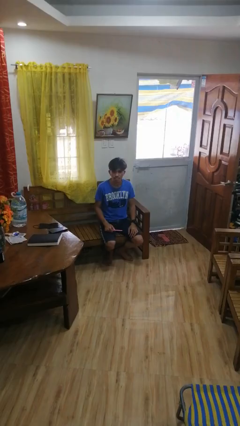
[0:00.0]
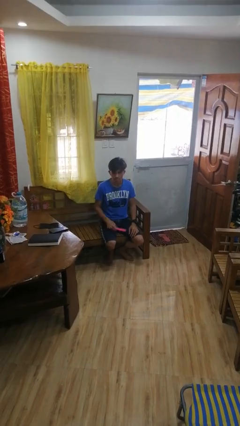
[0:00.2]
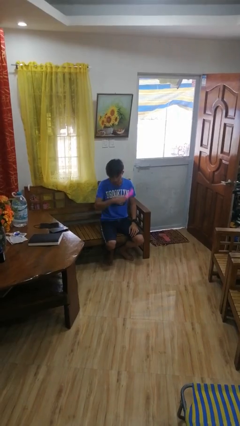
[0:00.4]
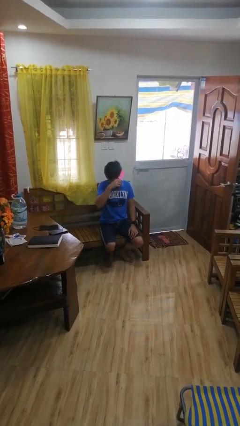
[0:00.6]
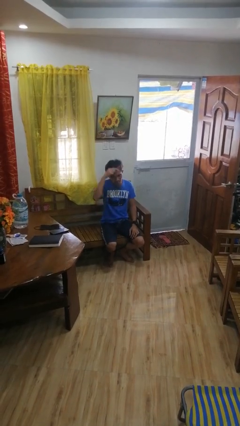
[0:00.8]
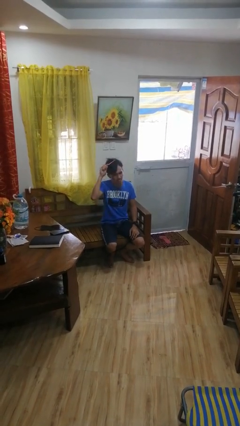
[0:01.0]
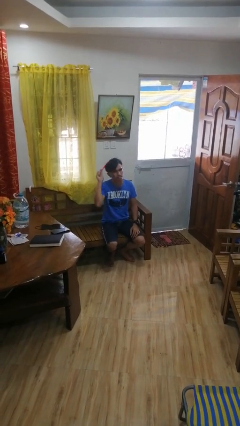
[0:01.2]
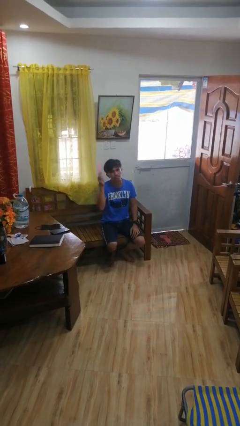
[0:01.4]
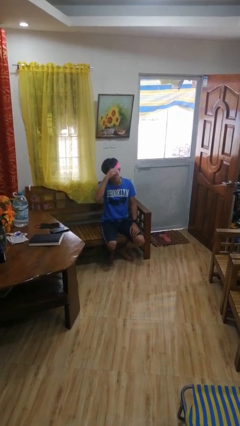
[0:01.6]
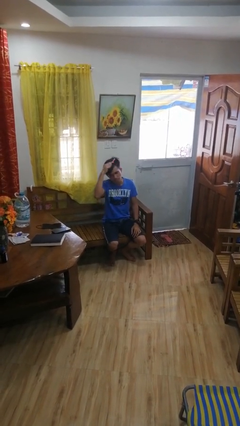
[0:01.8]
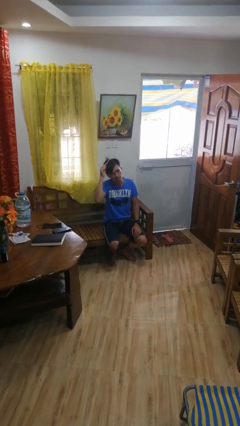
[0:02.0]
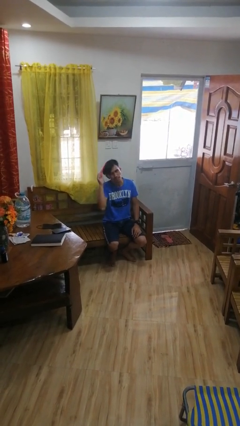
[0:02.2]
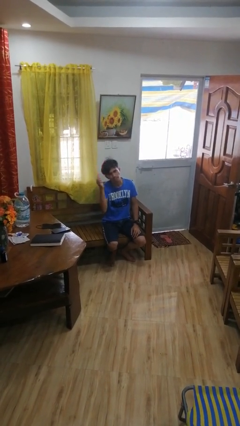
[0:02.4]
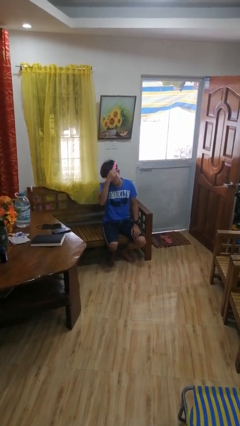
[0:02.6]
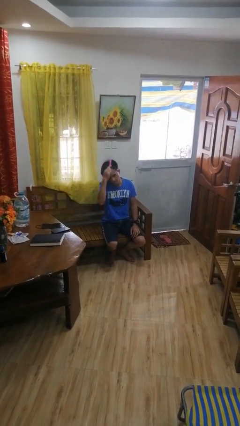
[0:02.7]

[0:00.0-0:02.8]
person brushes hair

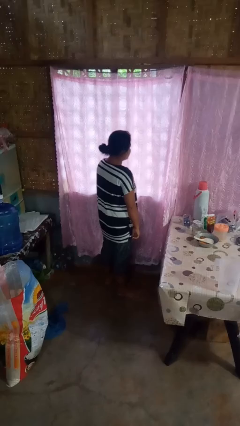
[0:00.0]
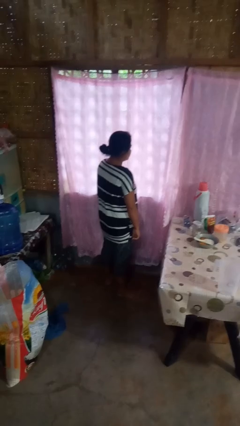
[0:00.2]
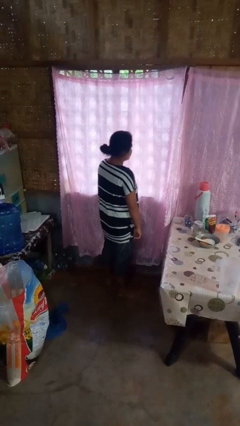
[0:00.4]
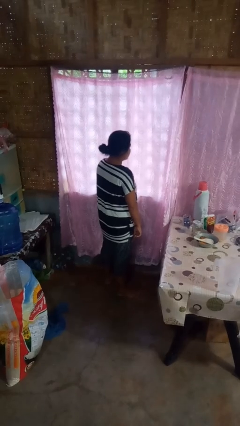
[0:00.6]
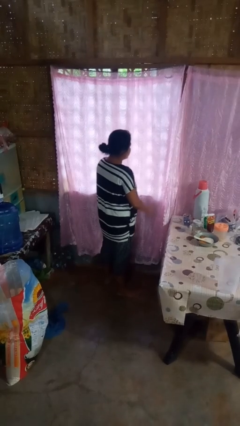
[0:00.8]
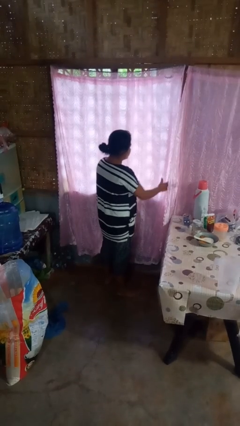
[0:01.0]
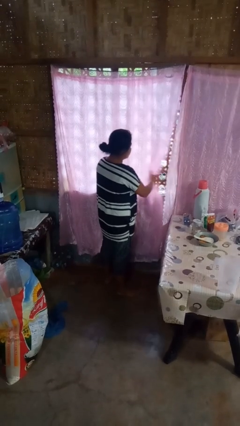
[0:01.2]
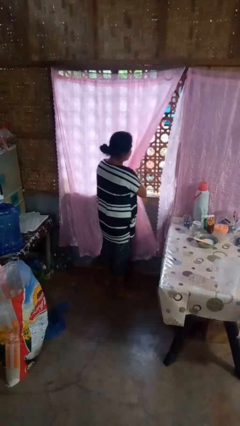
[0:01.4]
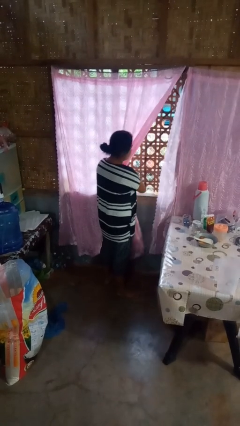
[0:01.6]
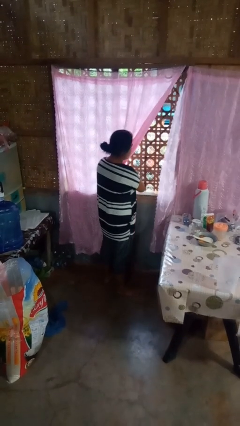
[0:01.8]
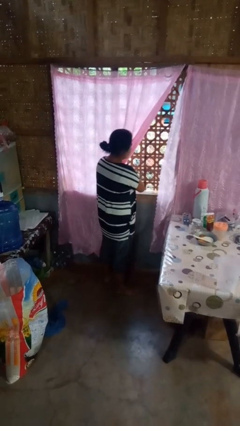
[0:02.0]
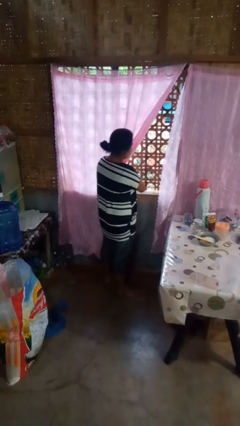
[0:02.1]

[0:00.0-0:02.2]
person opens curtains

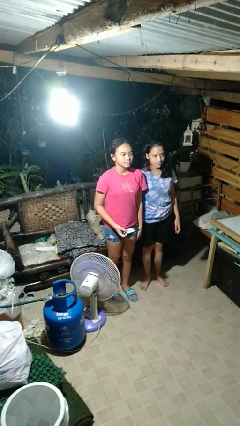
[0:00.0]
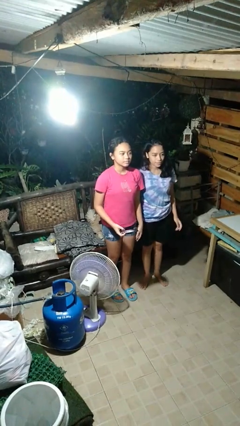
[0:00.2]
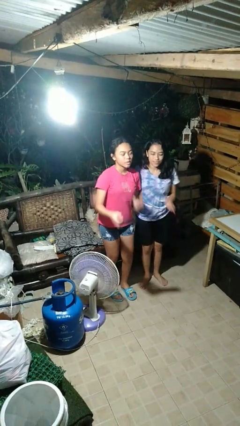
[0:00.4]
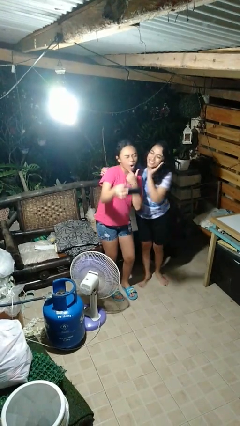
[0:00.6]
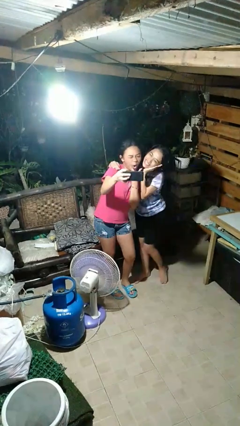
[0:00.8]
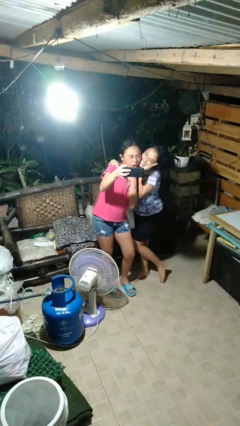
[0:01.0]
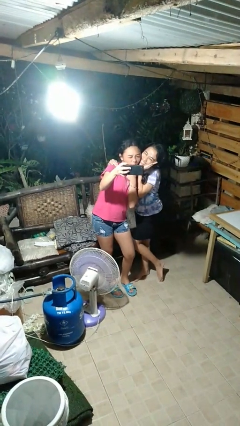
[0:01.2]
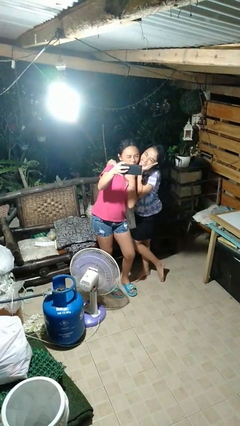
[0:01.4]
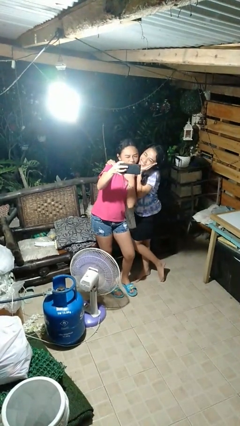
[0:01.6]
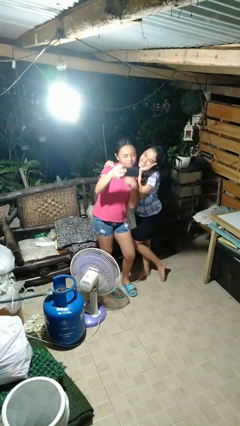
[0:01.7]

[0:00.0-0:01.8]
person takes selfie with person

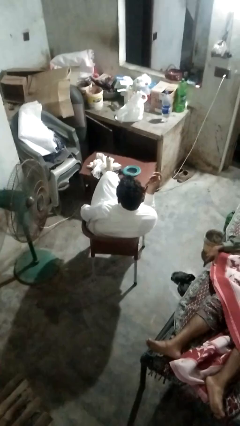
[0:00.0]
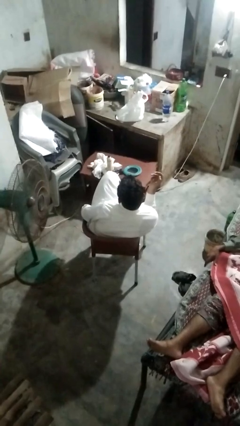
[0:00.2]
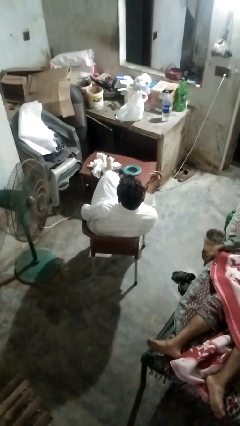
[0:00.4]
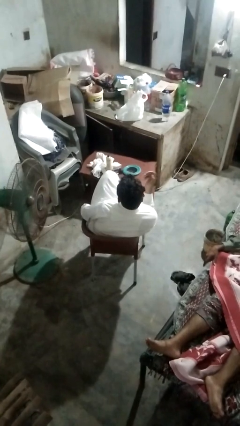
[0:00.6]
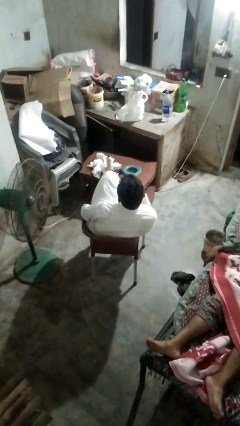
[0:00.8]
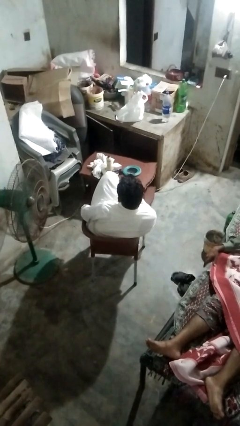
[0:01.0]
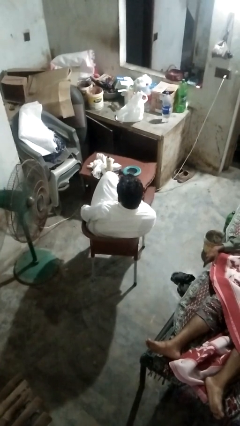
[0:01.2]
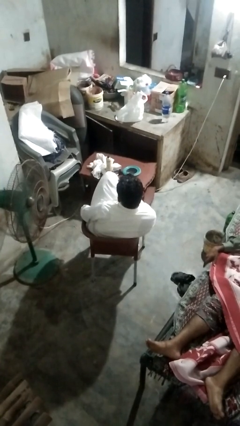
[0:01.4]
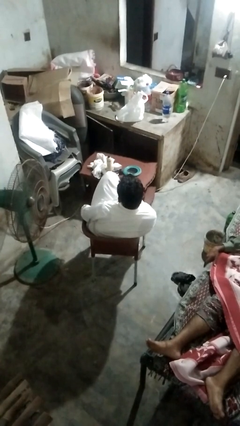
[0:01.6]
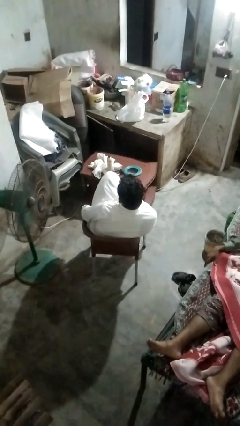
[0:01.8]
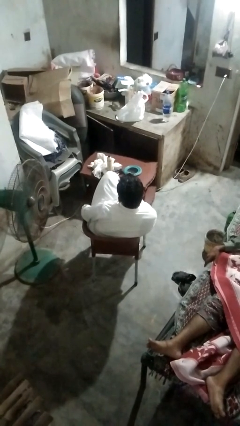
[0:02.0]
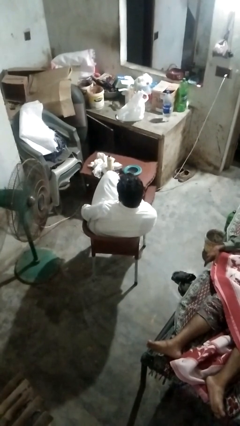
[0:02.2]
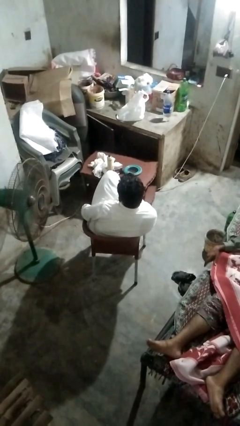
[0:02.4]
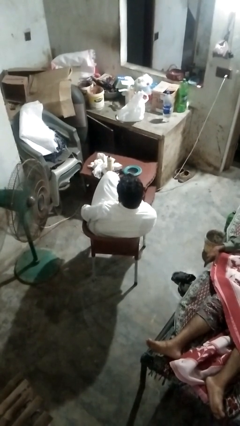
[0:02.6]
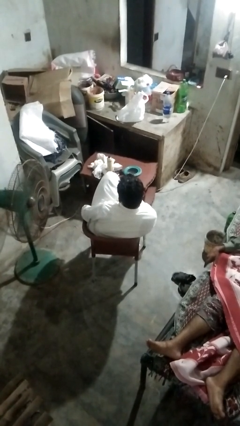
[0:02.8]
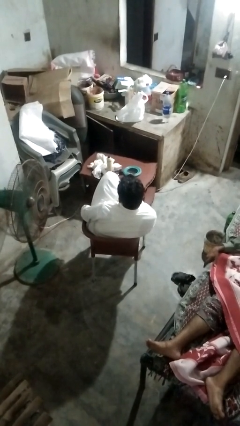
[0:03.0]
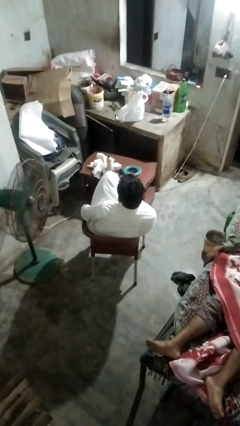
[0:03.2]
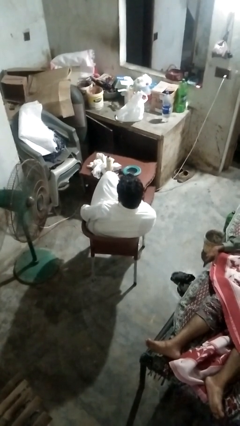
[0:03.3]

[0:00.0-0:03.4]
person licks fingers

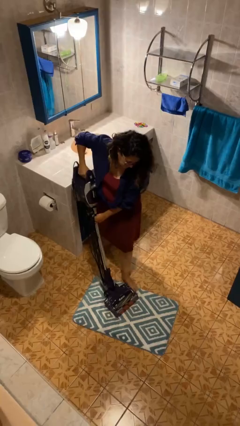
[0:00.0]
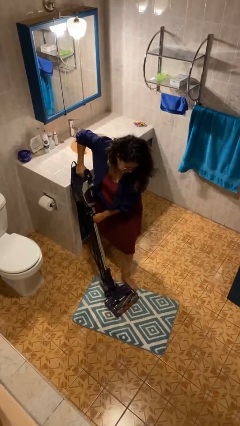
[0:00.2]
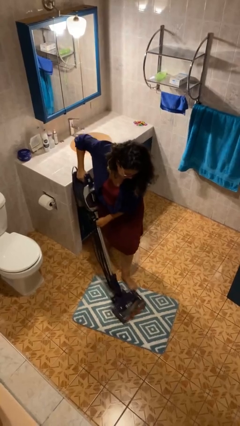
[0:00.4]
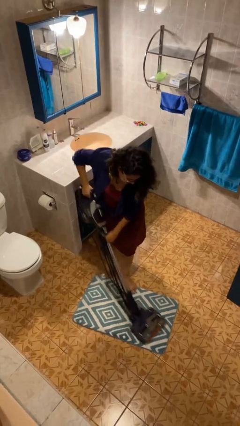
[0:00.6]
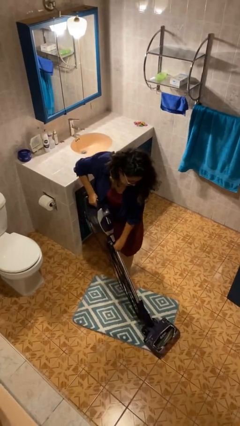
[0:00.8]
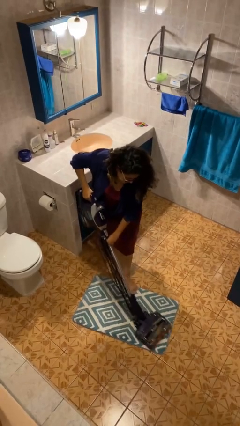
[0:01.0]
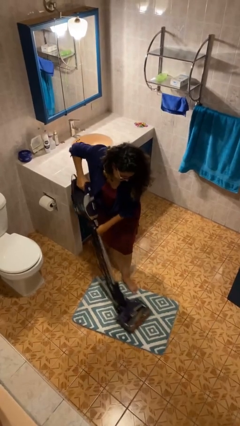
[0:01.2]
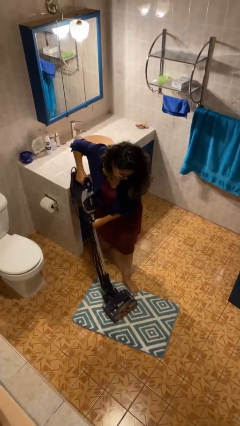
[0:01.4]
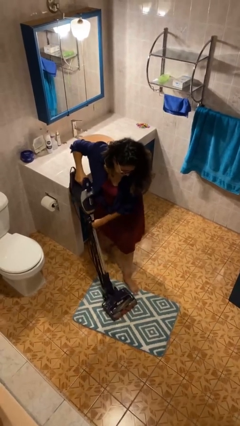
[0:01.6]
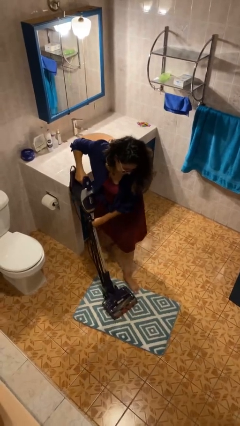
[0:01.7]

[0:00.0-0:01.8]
person vacuums carpet

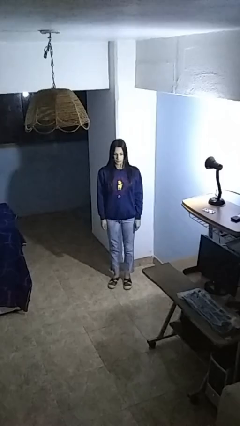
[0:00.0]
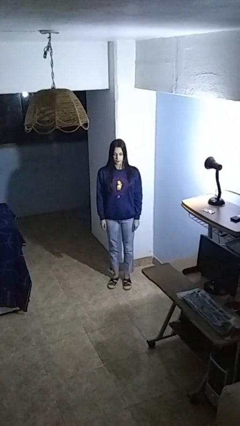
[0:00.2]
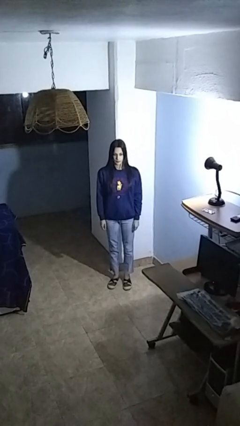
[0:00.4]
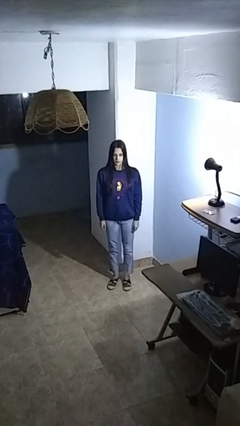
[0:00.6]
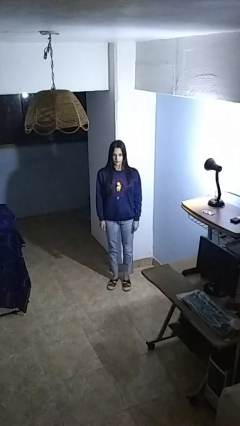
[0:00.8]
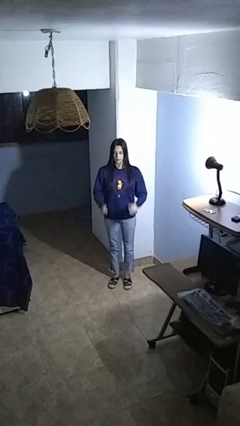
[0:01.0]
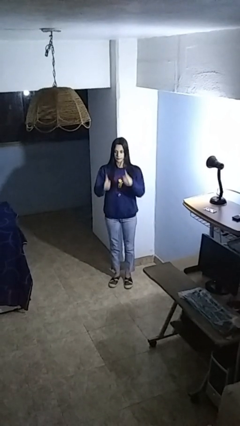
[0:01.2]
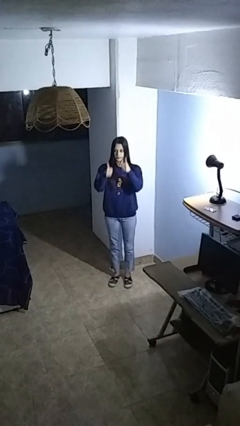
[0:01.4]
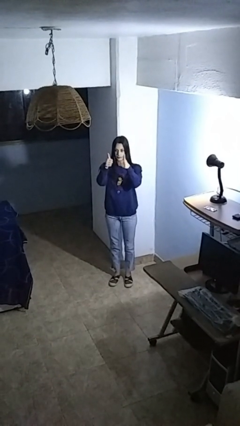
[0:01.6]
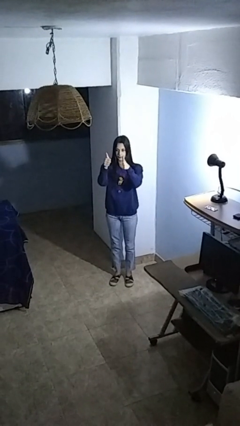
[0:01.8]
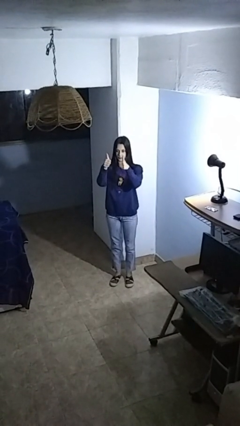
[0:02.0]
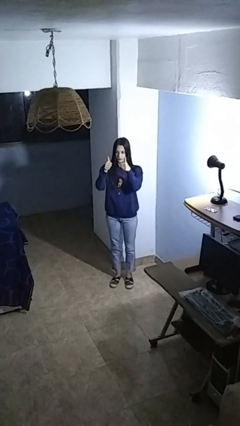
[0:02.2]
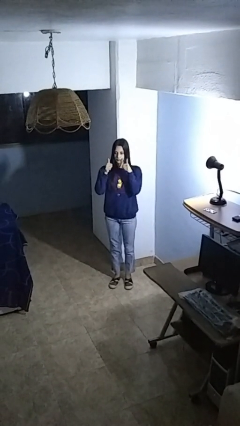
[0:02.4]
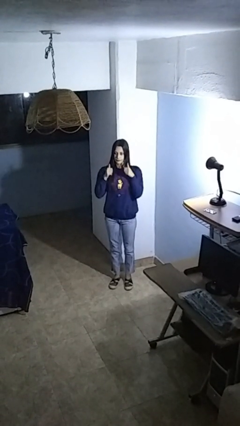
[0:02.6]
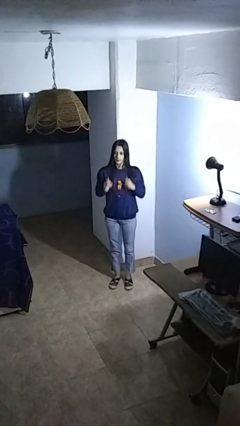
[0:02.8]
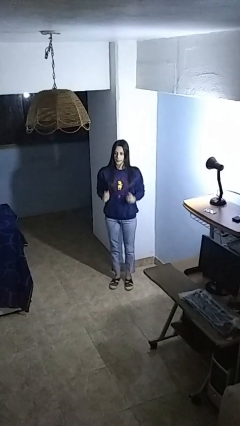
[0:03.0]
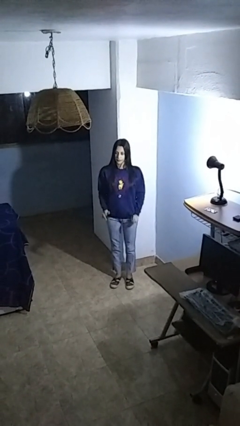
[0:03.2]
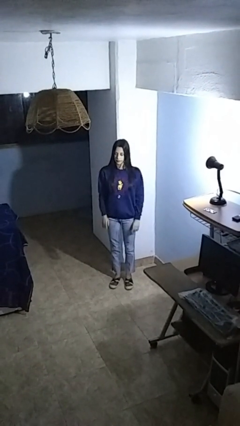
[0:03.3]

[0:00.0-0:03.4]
person gestures thumbs up

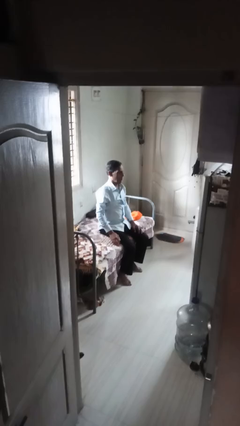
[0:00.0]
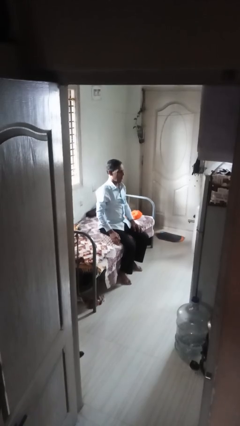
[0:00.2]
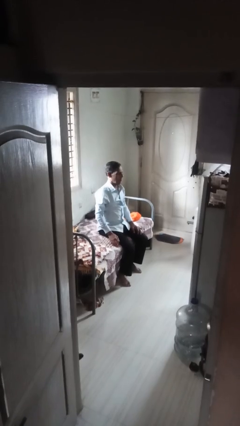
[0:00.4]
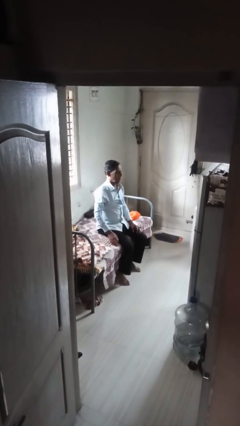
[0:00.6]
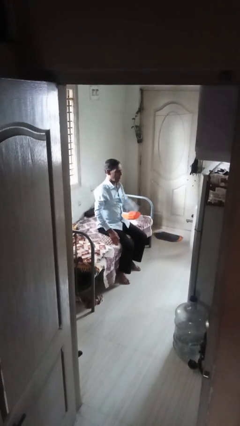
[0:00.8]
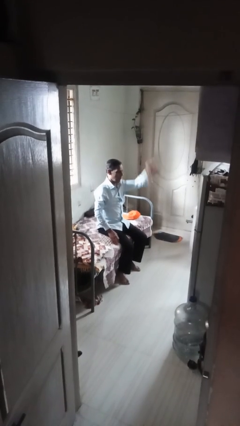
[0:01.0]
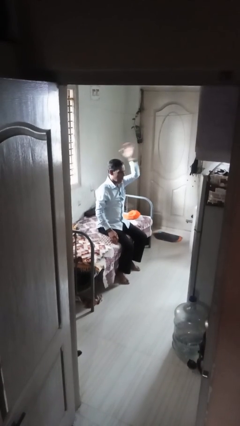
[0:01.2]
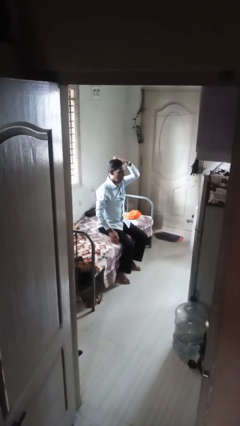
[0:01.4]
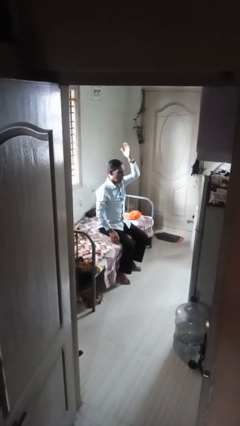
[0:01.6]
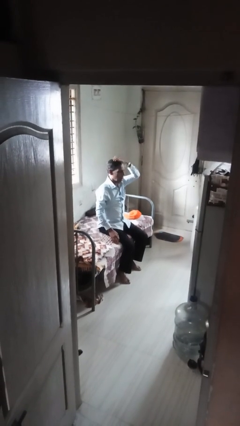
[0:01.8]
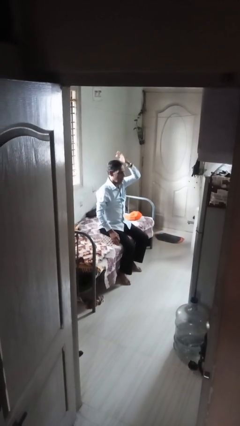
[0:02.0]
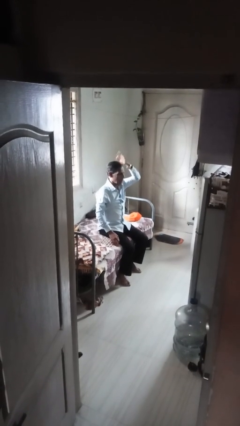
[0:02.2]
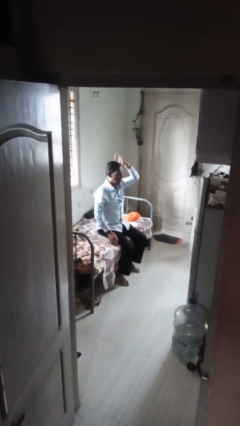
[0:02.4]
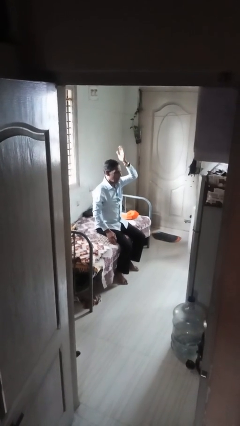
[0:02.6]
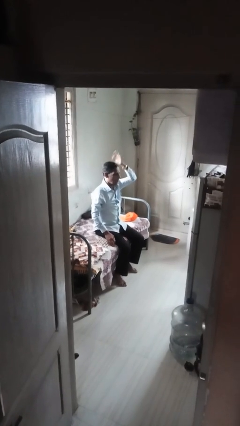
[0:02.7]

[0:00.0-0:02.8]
person pats head
